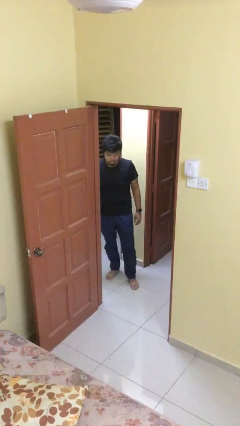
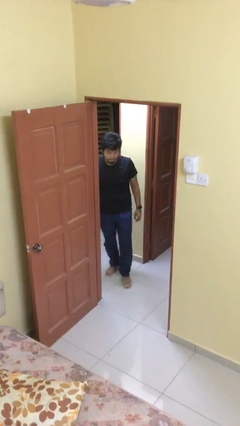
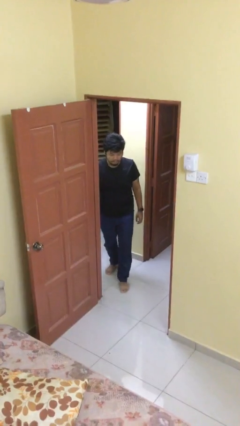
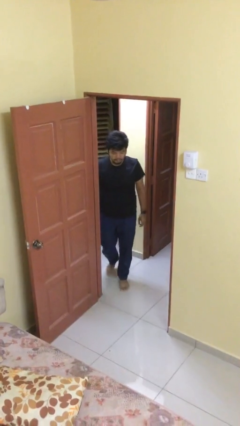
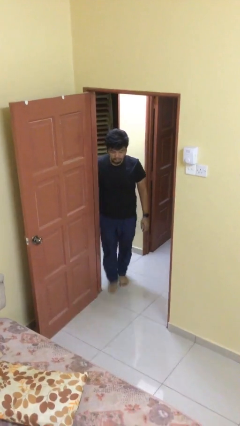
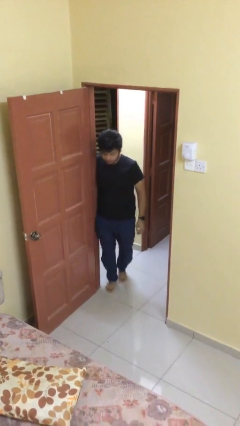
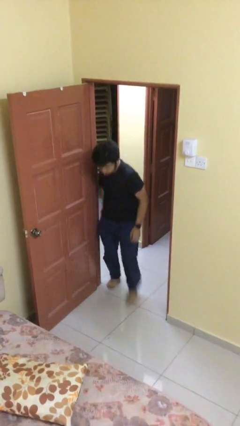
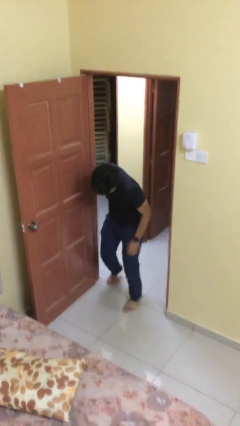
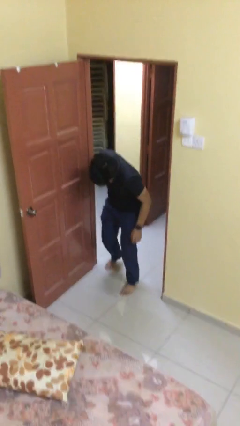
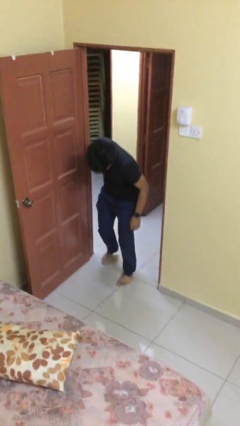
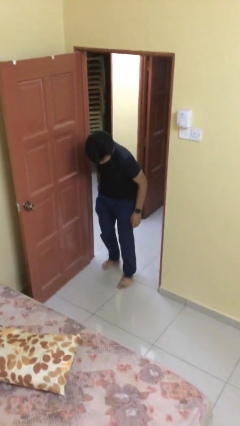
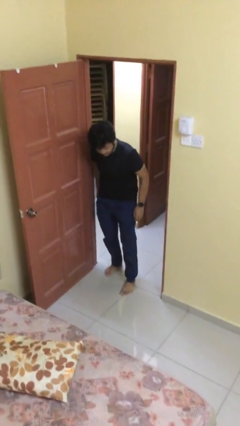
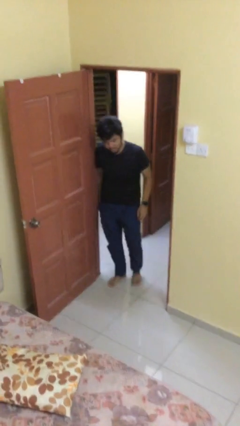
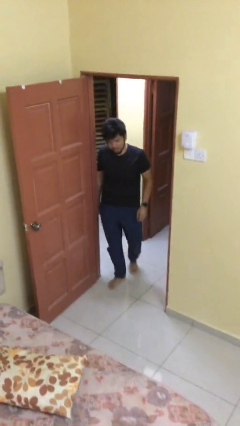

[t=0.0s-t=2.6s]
person bumps into wall

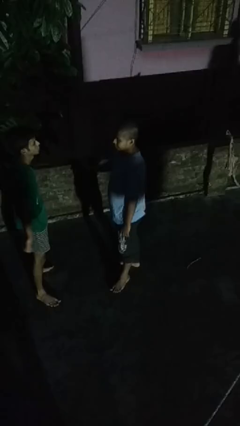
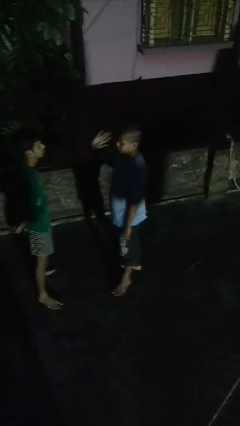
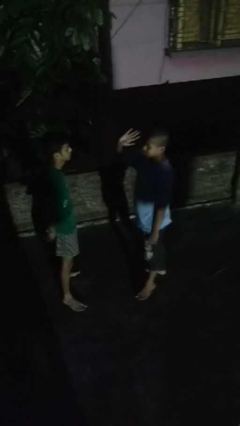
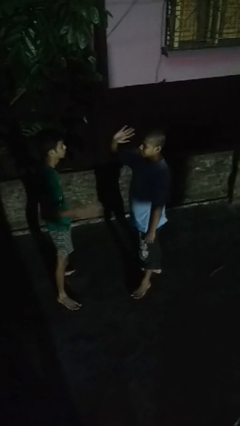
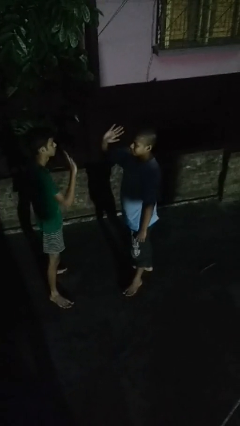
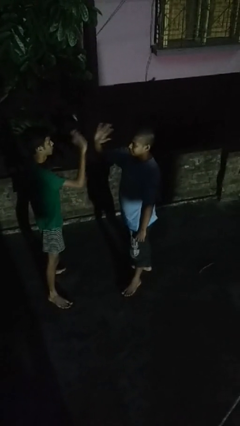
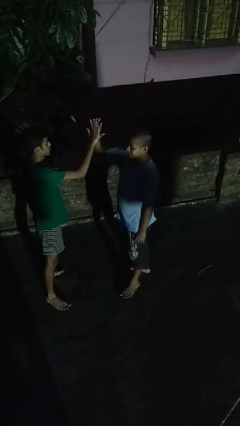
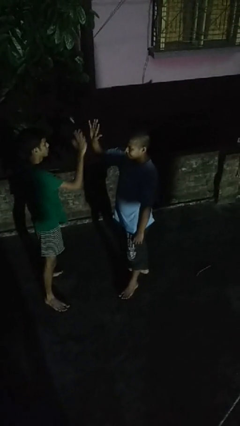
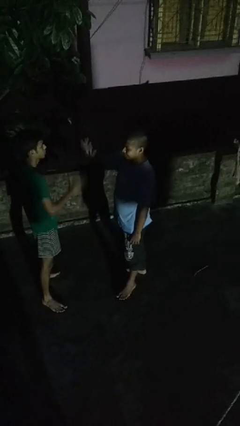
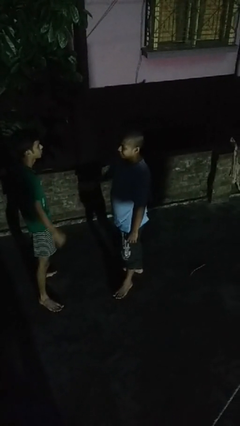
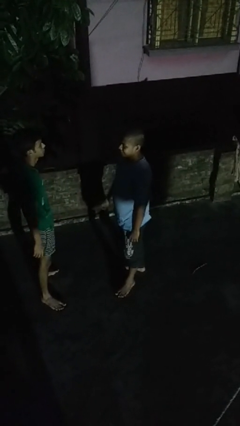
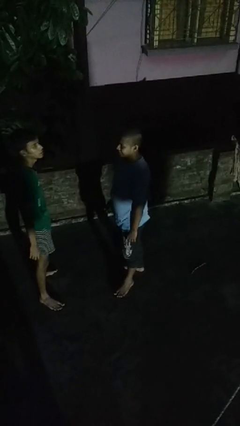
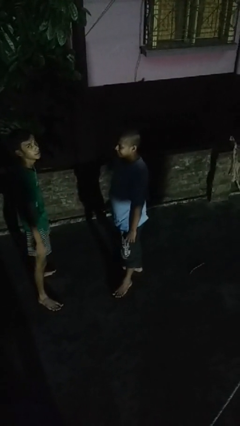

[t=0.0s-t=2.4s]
person highfives hand

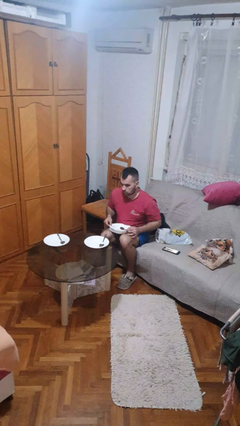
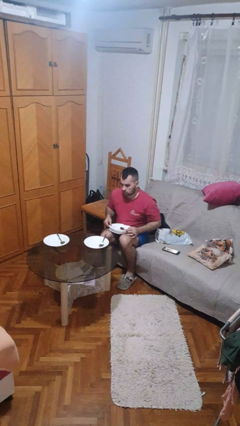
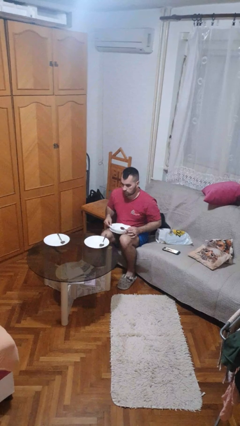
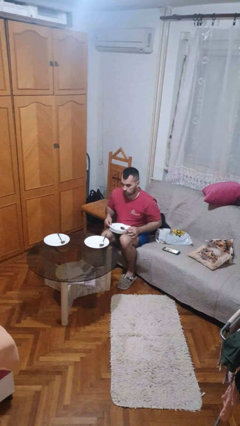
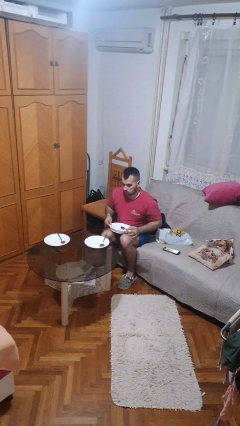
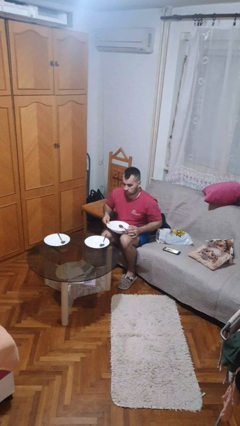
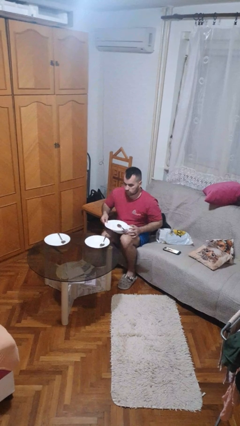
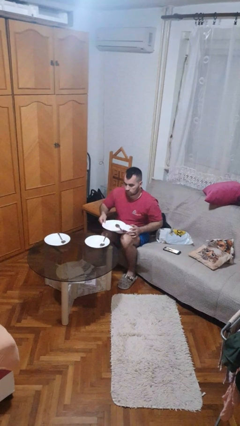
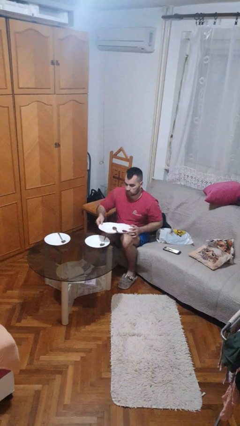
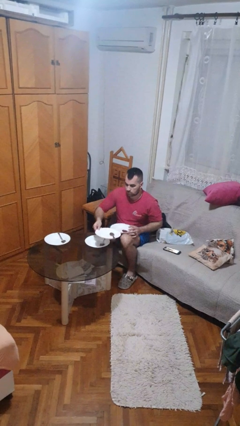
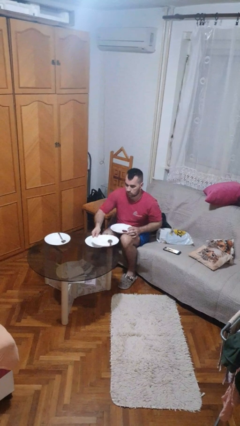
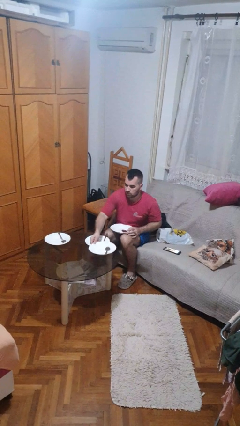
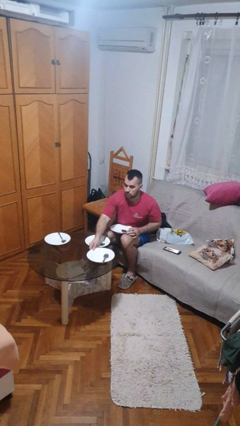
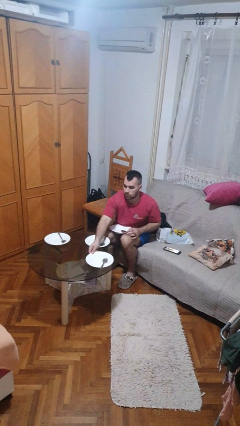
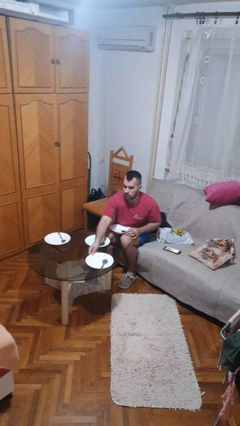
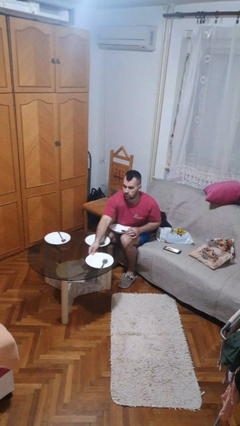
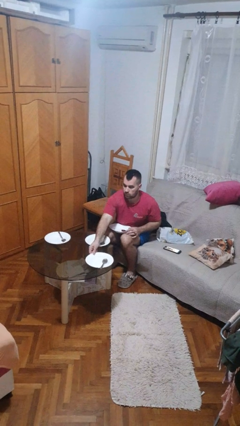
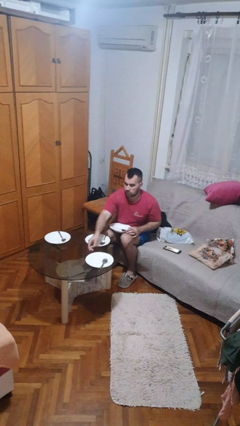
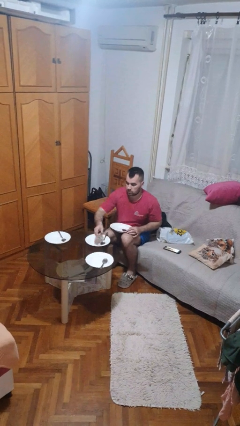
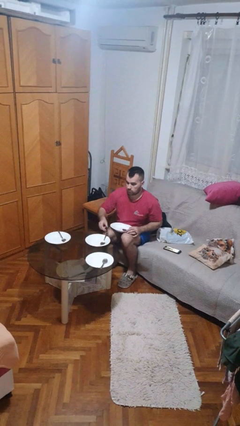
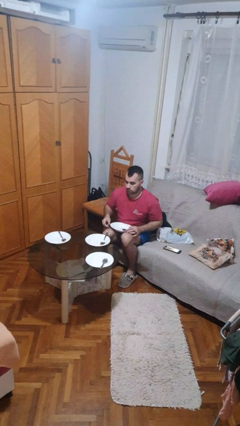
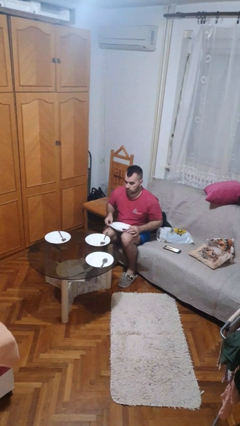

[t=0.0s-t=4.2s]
person sets table

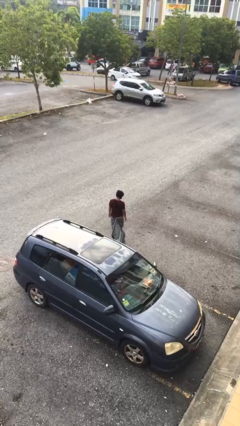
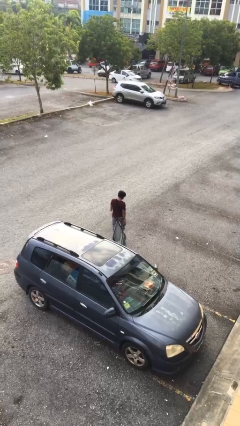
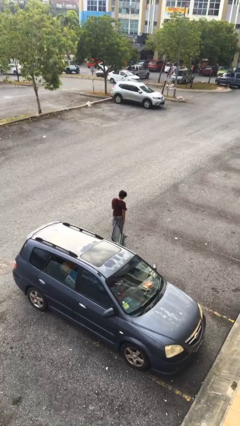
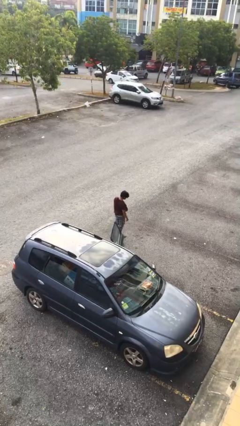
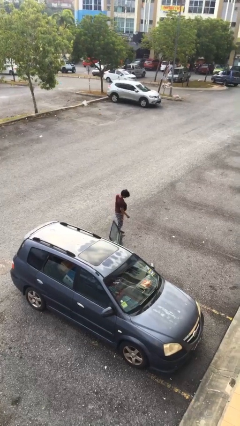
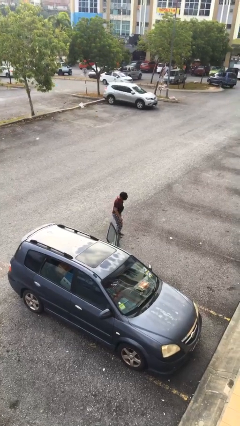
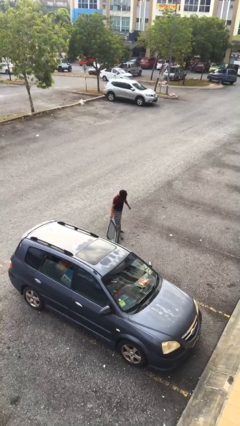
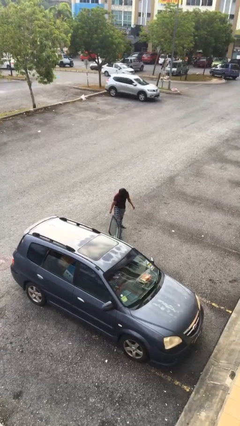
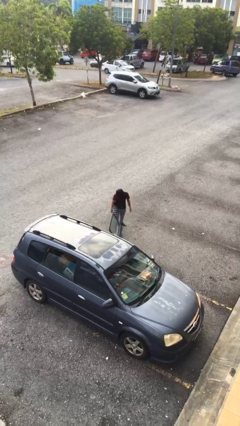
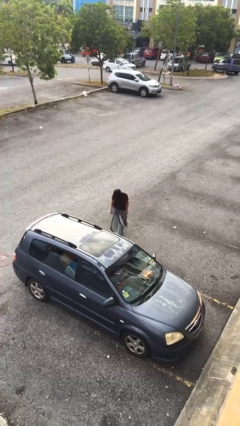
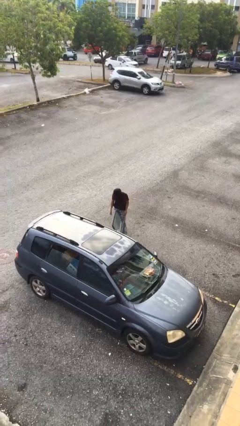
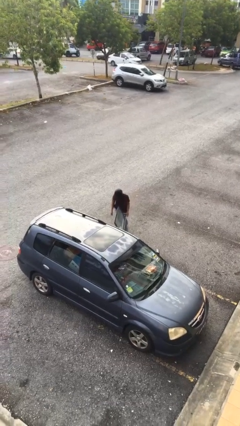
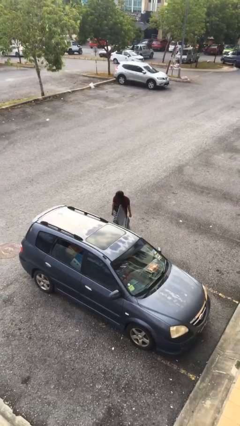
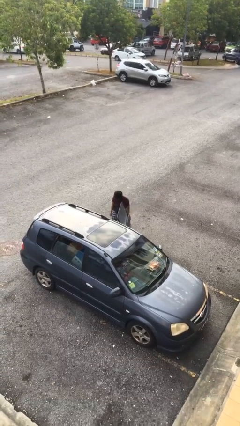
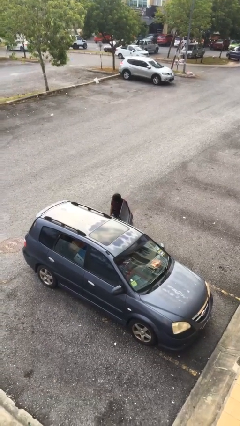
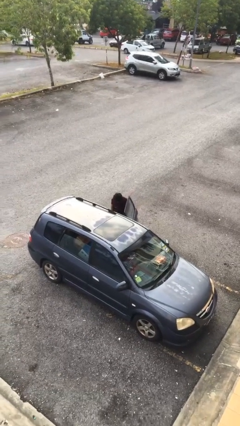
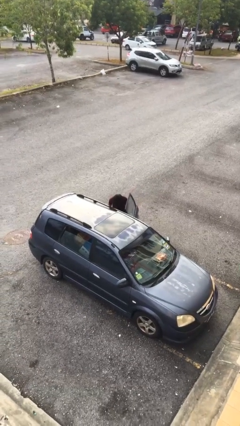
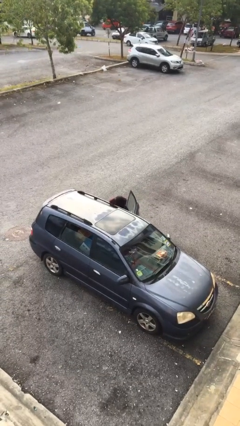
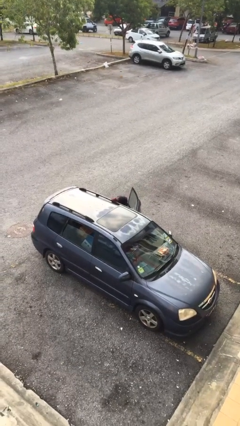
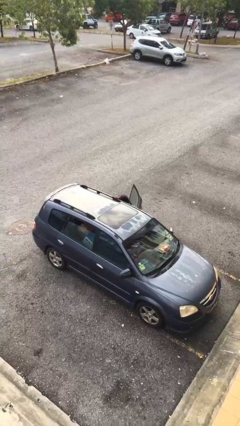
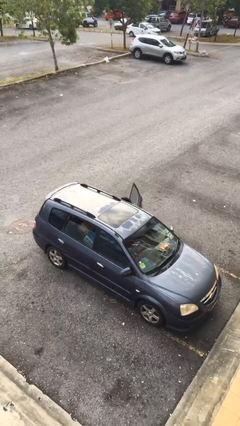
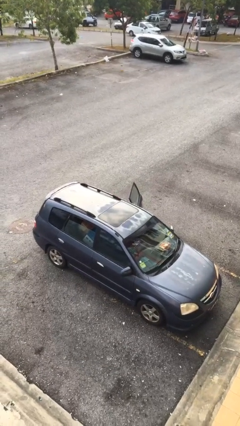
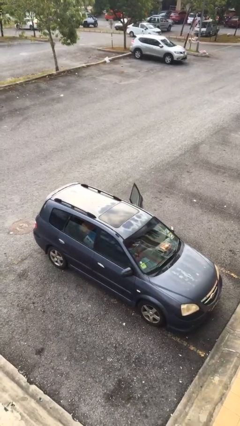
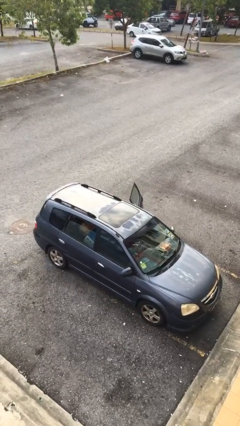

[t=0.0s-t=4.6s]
person enters car

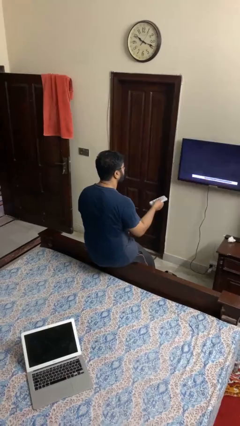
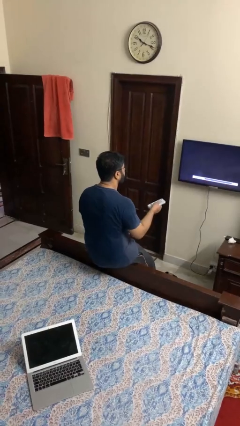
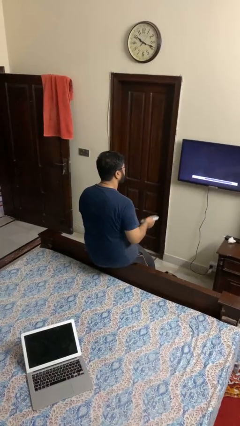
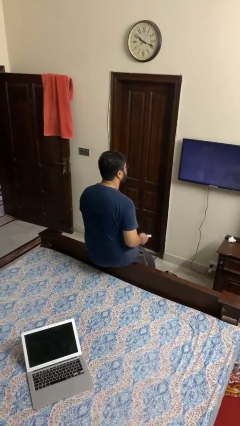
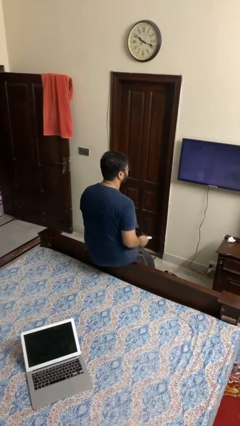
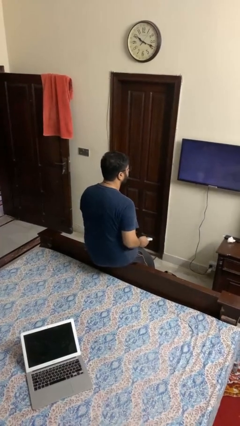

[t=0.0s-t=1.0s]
person uses television remote

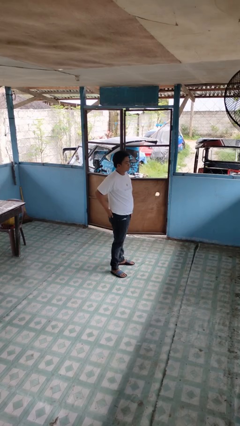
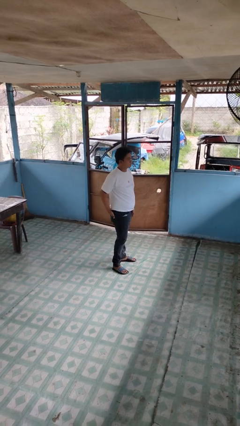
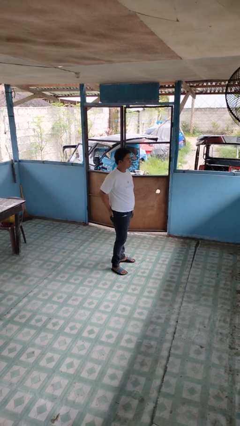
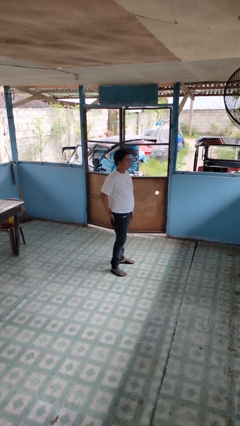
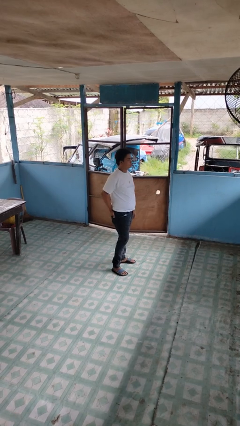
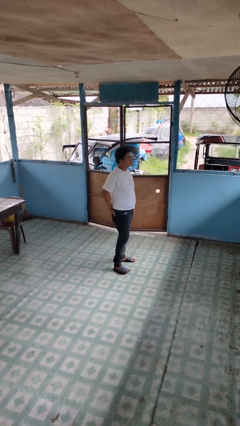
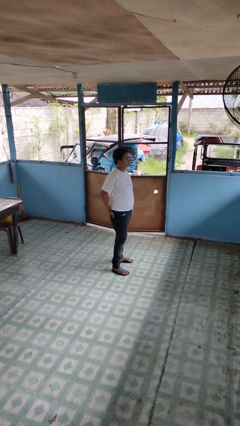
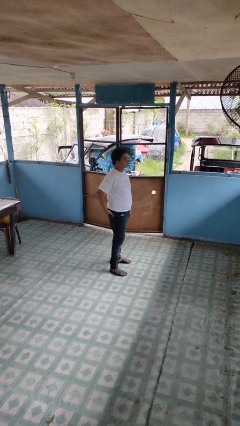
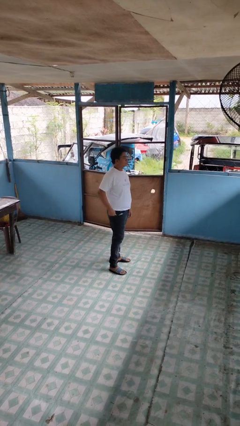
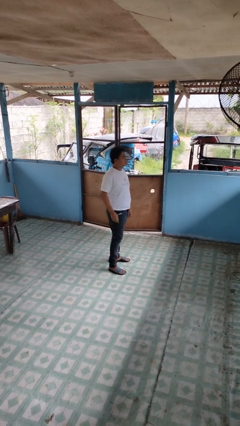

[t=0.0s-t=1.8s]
person puts hands in back pockets

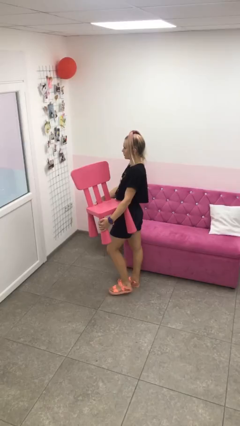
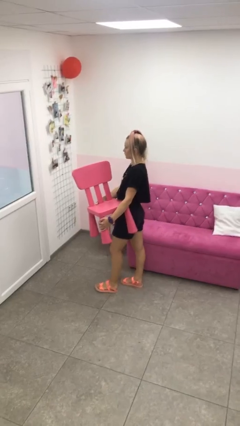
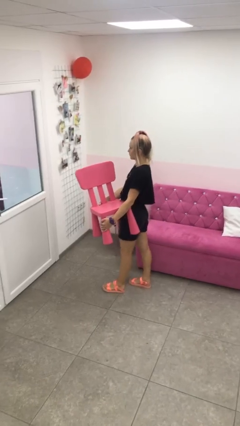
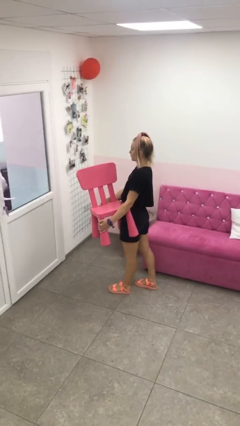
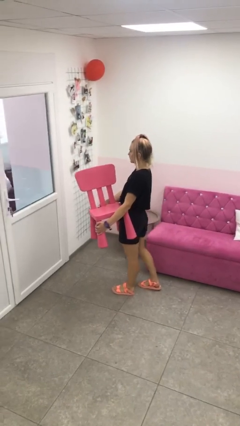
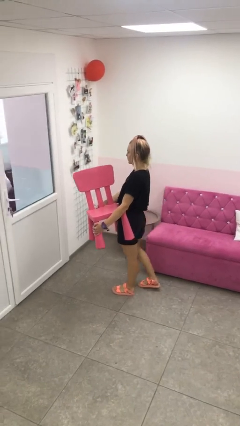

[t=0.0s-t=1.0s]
person carries furniture
